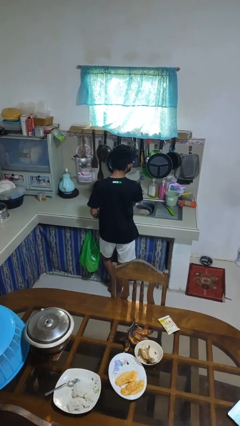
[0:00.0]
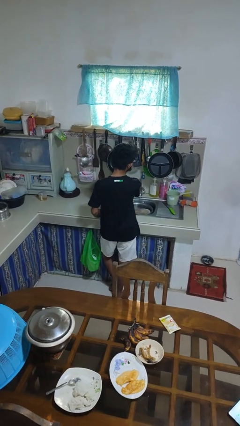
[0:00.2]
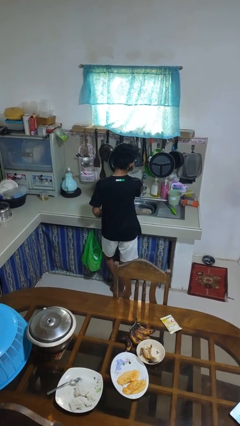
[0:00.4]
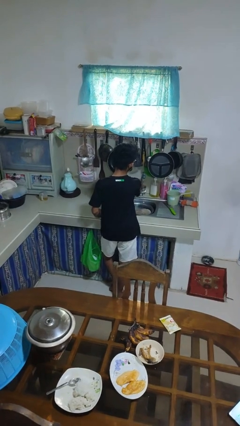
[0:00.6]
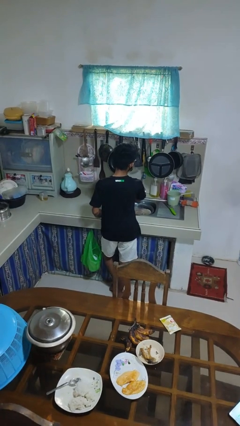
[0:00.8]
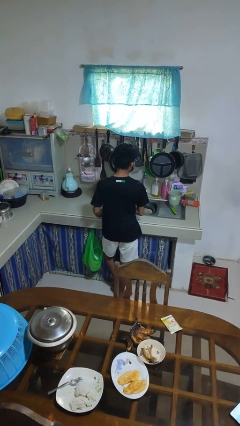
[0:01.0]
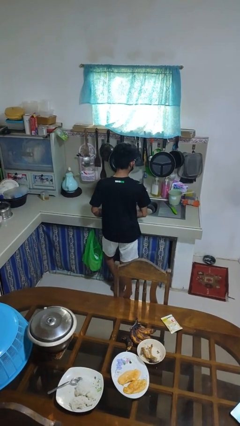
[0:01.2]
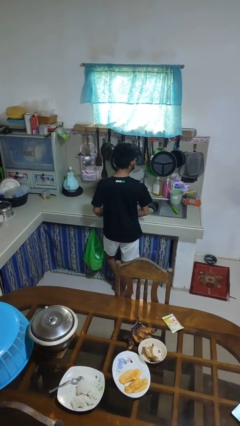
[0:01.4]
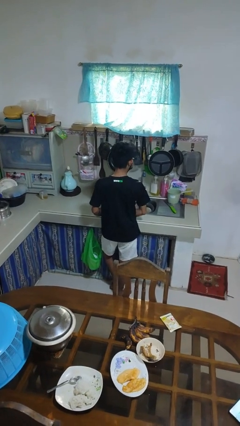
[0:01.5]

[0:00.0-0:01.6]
person closes clothes washer

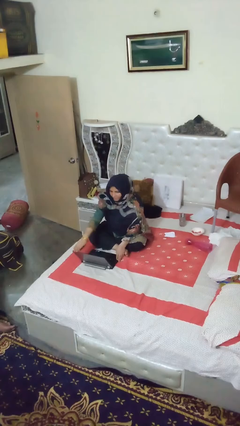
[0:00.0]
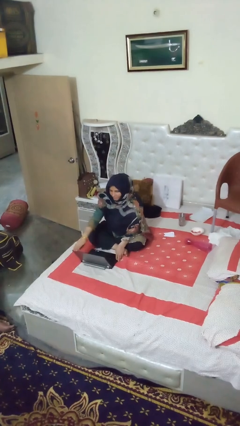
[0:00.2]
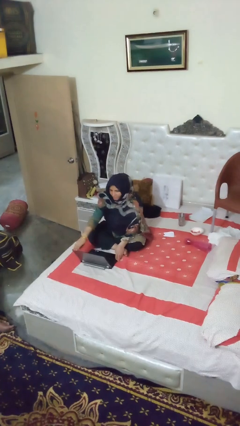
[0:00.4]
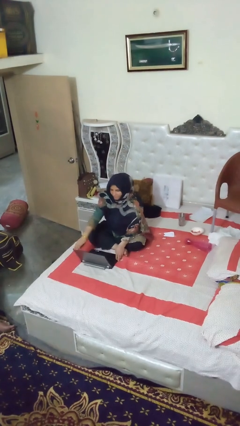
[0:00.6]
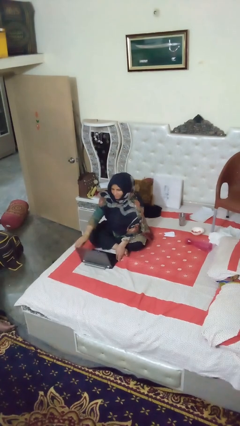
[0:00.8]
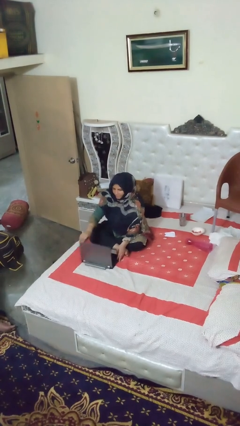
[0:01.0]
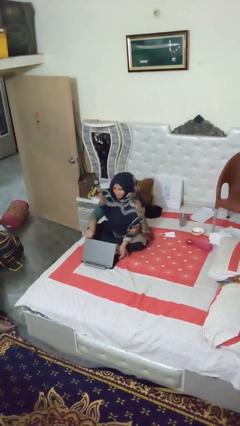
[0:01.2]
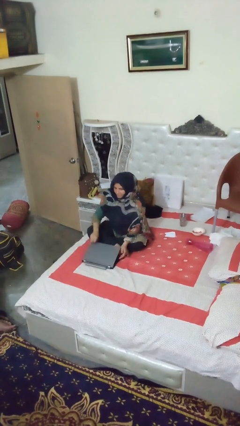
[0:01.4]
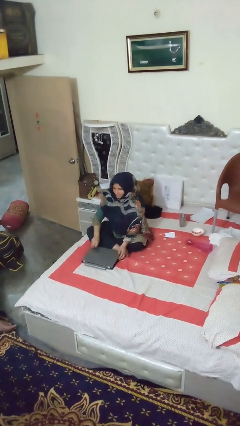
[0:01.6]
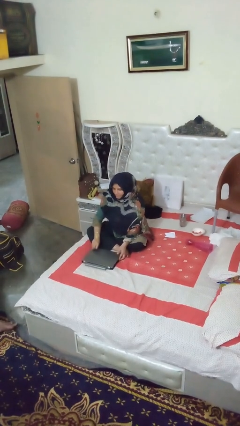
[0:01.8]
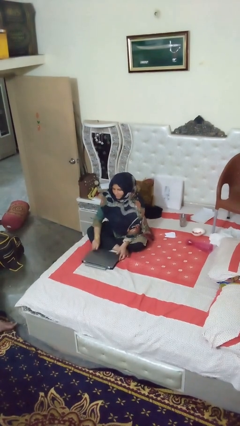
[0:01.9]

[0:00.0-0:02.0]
person closes laptop

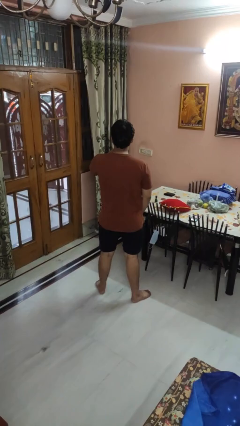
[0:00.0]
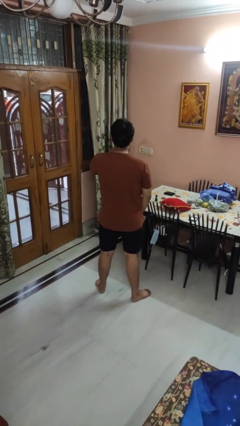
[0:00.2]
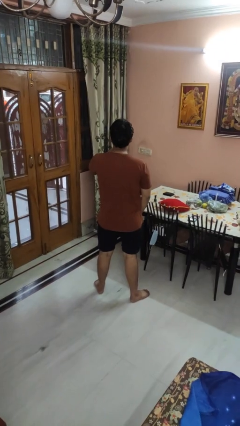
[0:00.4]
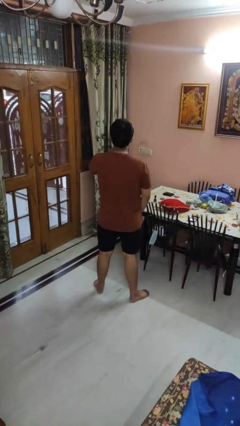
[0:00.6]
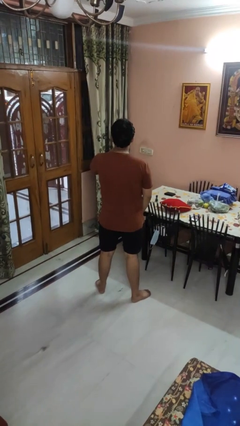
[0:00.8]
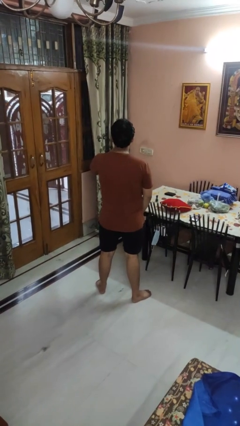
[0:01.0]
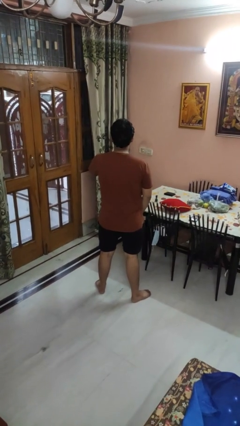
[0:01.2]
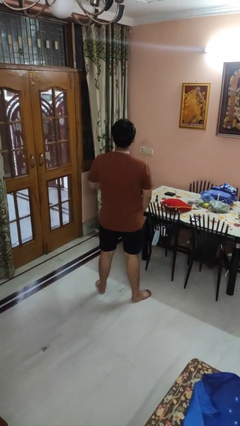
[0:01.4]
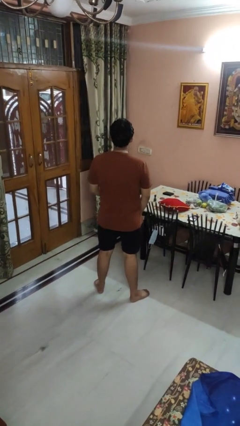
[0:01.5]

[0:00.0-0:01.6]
person gestures be quiet

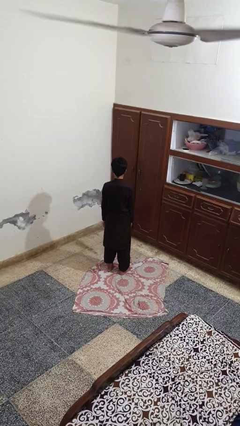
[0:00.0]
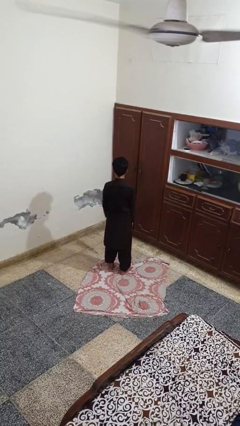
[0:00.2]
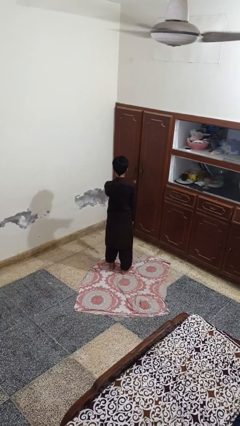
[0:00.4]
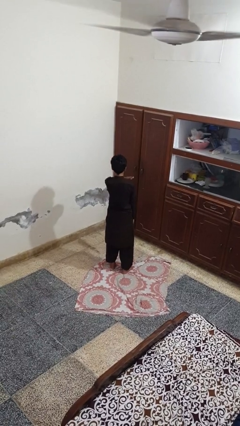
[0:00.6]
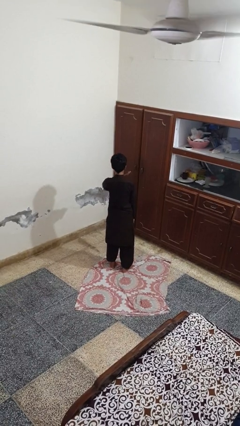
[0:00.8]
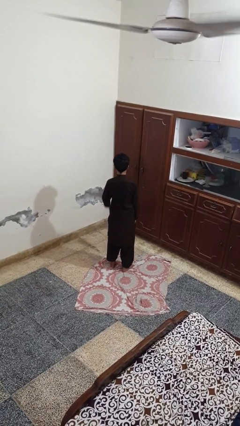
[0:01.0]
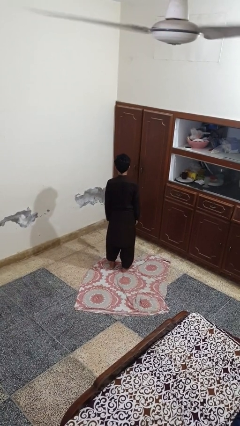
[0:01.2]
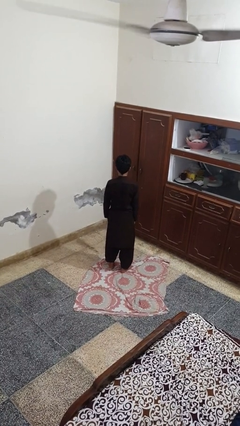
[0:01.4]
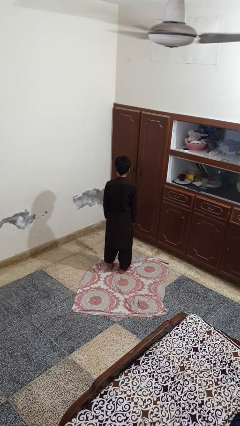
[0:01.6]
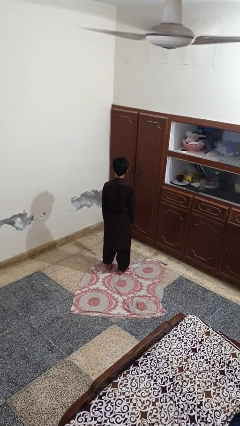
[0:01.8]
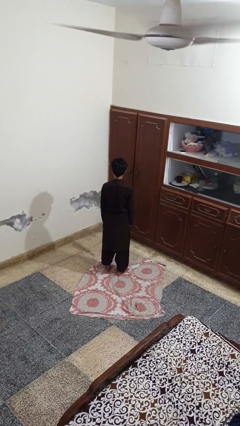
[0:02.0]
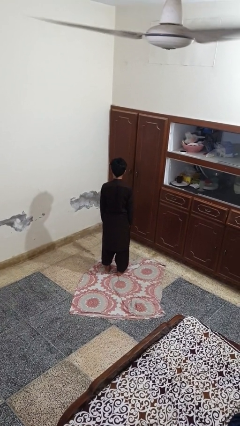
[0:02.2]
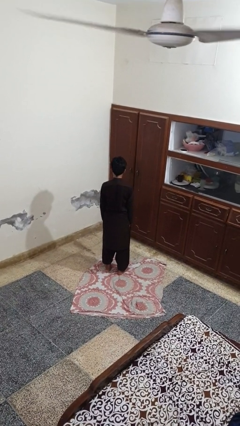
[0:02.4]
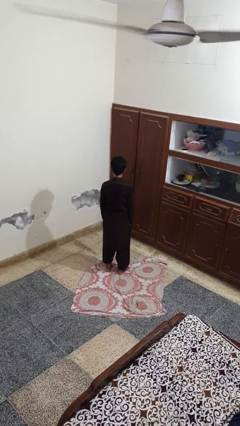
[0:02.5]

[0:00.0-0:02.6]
person karate chop

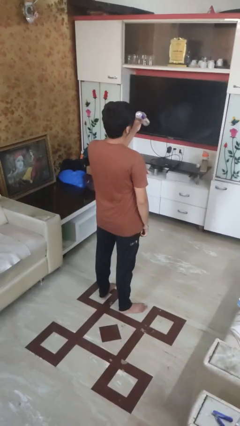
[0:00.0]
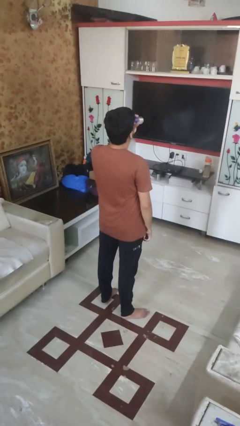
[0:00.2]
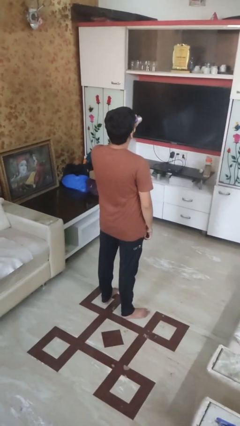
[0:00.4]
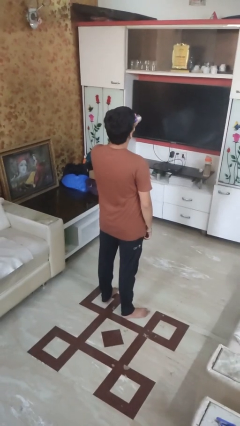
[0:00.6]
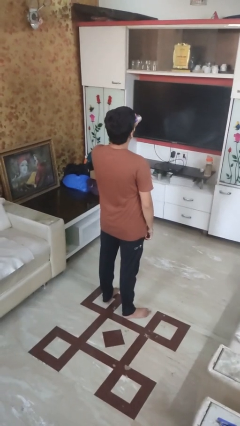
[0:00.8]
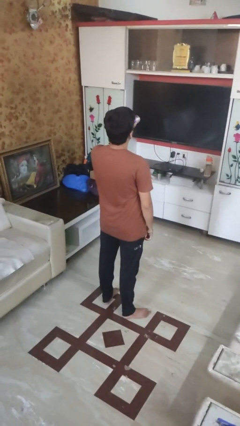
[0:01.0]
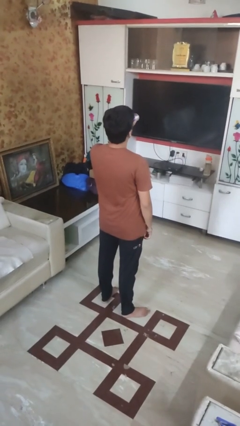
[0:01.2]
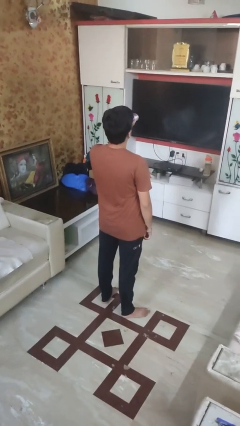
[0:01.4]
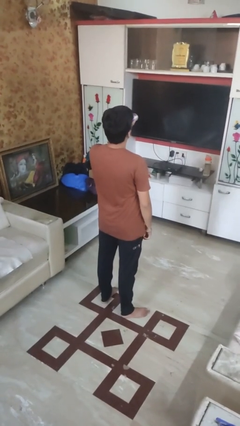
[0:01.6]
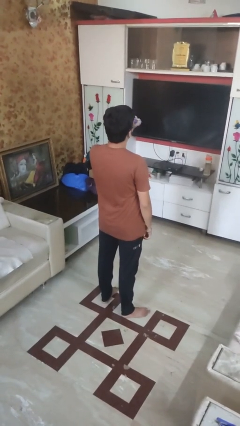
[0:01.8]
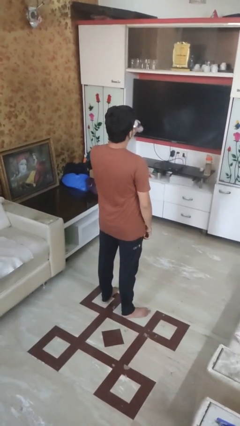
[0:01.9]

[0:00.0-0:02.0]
person drinks from beverage can

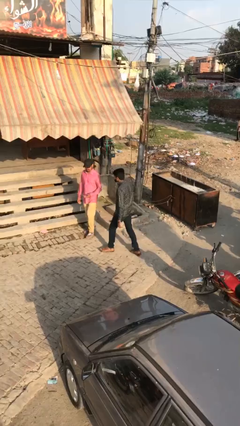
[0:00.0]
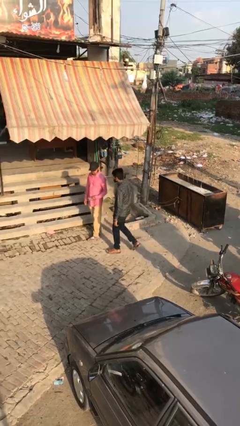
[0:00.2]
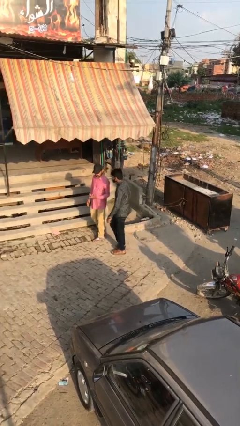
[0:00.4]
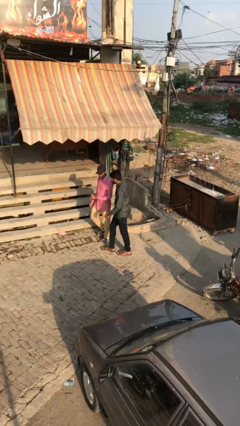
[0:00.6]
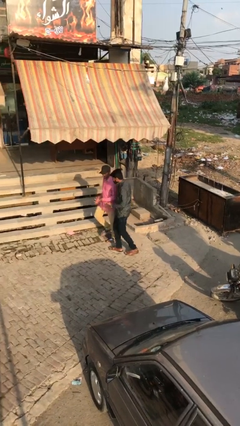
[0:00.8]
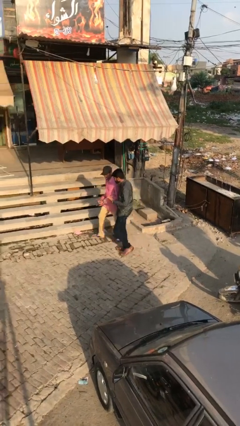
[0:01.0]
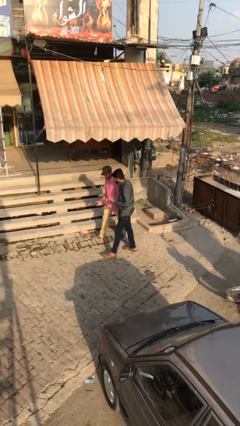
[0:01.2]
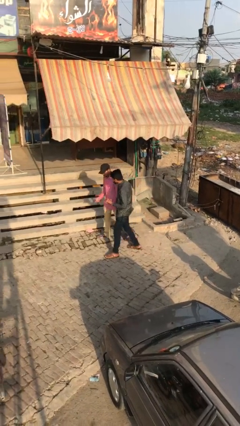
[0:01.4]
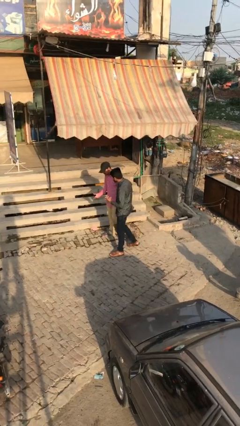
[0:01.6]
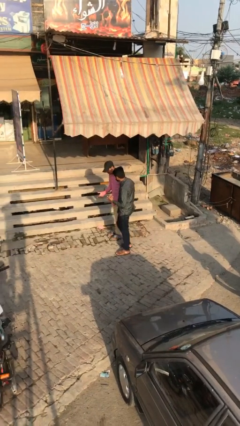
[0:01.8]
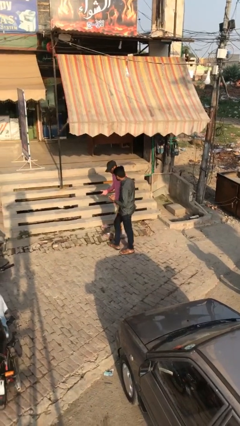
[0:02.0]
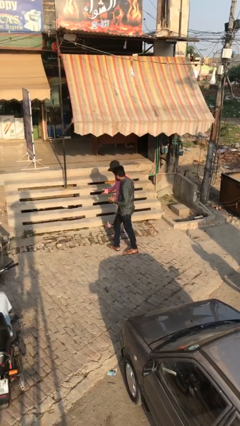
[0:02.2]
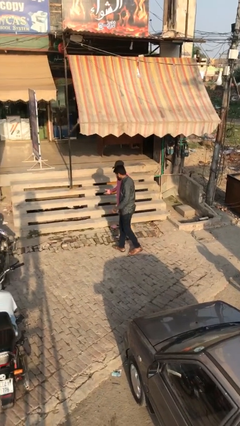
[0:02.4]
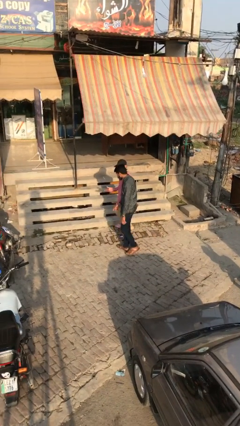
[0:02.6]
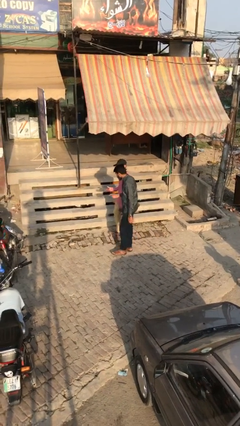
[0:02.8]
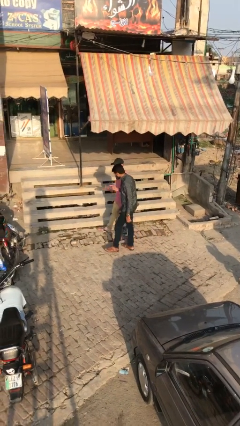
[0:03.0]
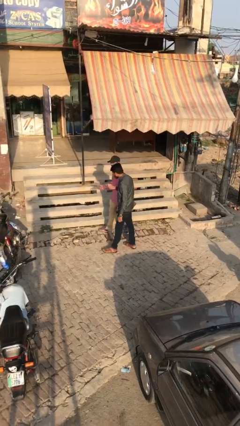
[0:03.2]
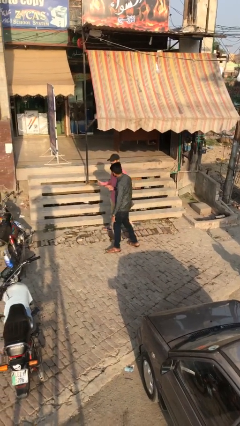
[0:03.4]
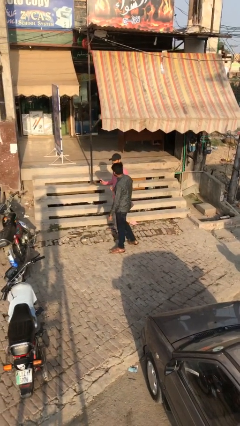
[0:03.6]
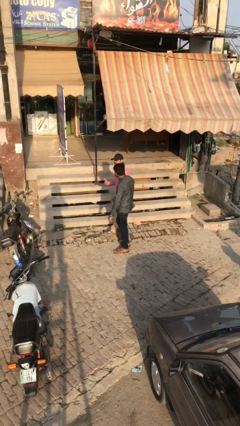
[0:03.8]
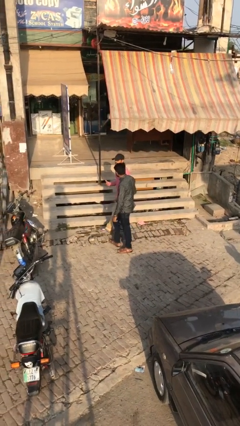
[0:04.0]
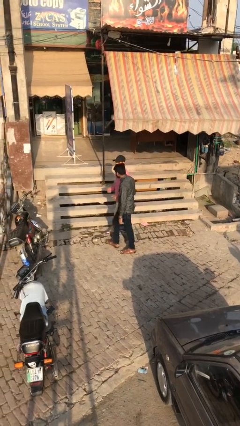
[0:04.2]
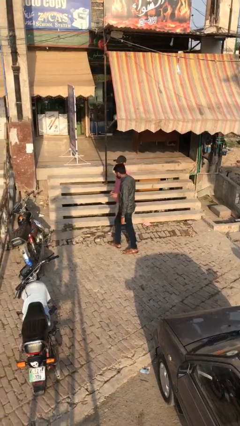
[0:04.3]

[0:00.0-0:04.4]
person talks to person

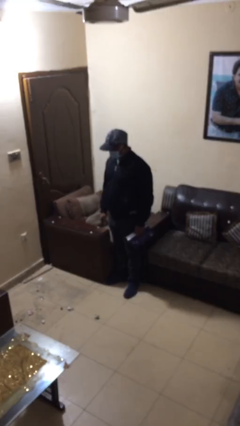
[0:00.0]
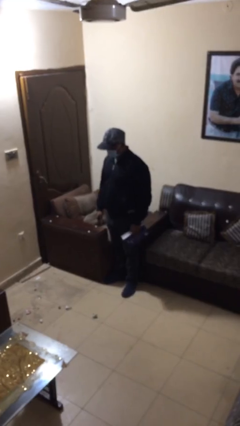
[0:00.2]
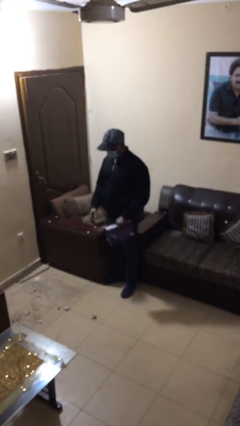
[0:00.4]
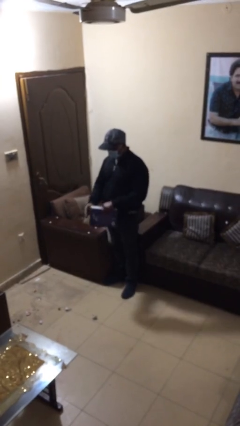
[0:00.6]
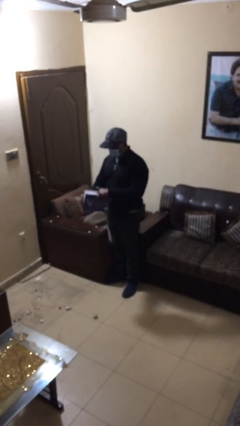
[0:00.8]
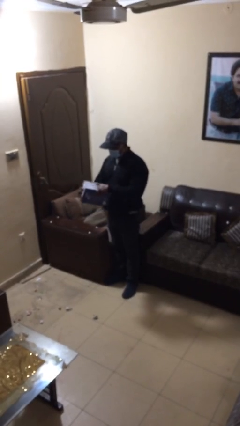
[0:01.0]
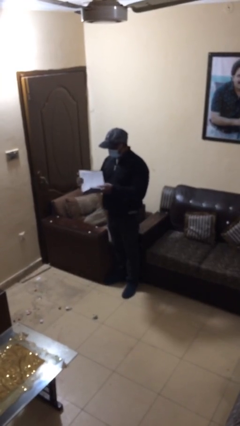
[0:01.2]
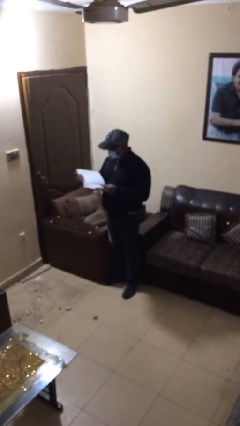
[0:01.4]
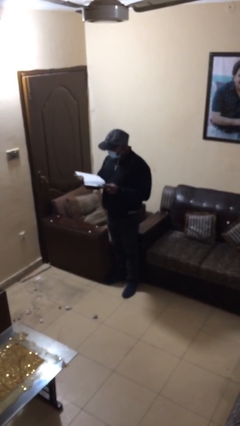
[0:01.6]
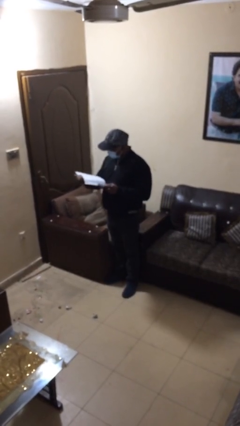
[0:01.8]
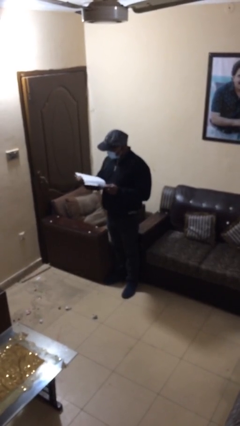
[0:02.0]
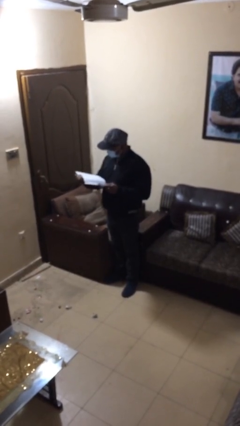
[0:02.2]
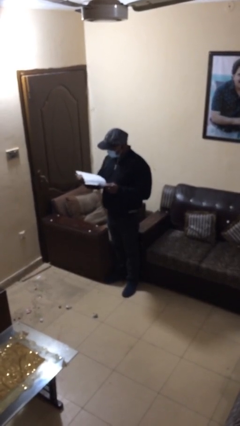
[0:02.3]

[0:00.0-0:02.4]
person reads document

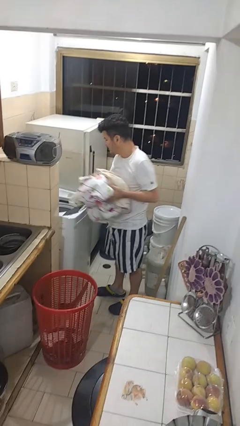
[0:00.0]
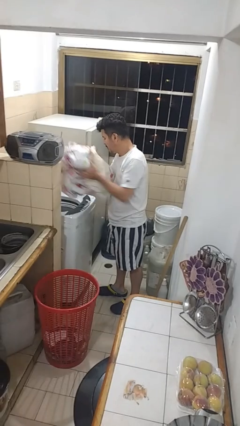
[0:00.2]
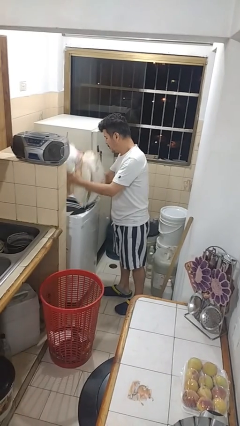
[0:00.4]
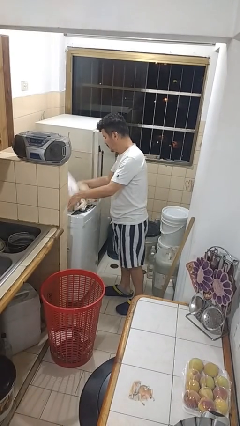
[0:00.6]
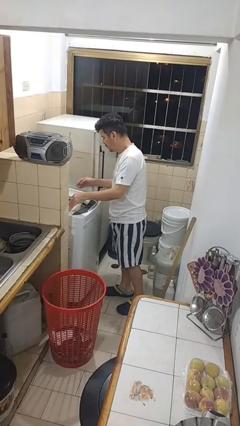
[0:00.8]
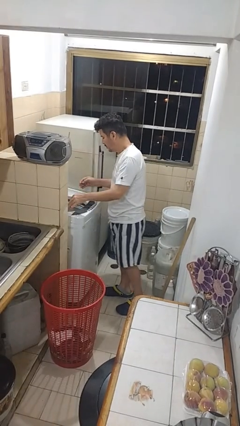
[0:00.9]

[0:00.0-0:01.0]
person loads clotheswasher
